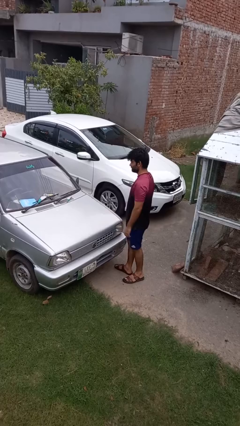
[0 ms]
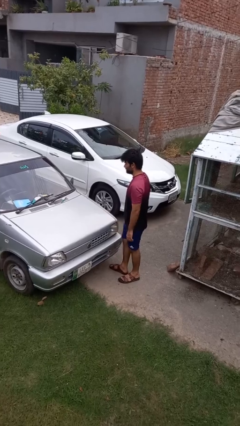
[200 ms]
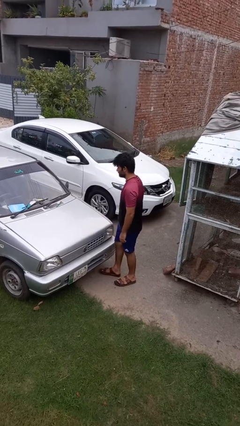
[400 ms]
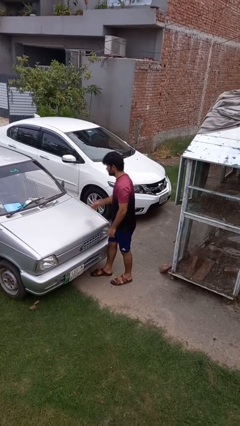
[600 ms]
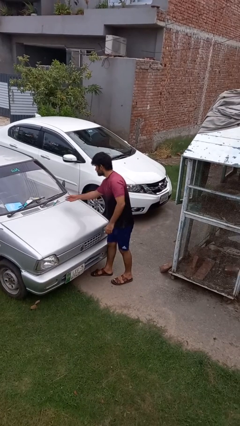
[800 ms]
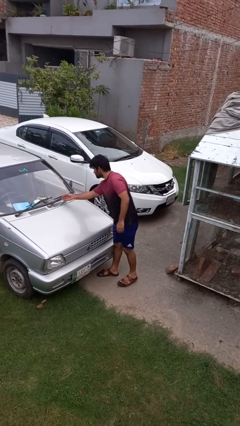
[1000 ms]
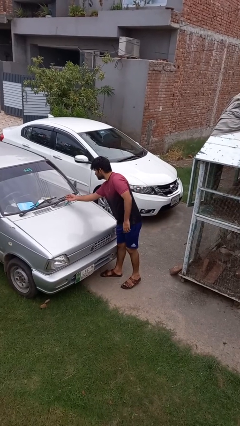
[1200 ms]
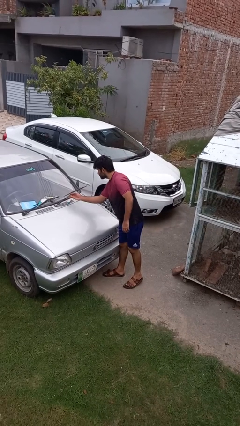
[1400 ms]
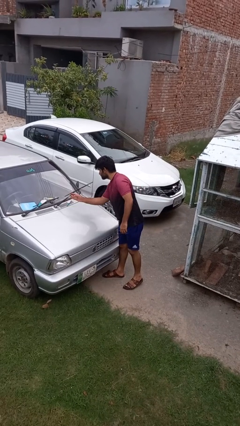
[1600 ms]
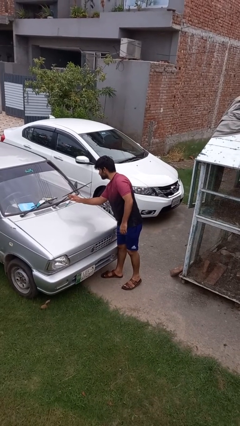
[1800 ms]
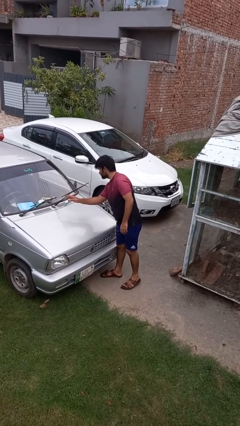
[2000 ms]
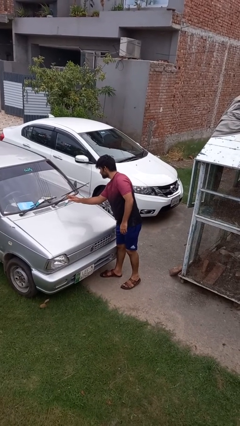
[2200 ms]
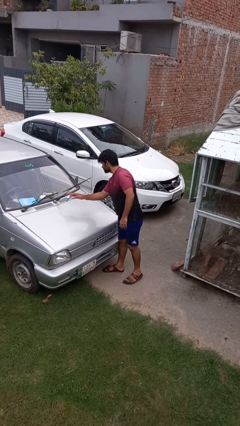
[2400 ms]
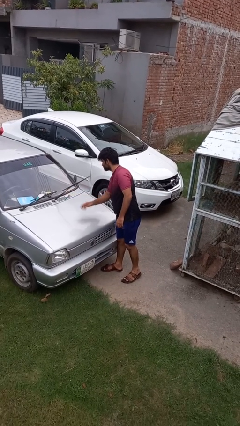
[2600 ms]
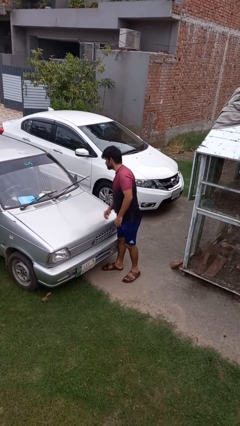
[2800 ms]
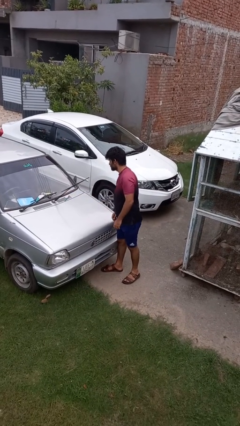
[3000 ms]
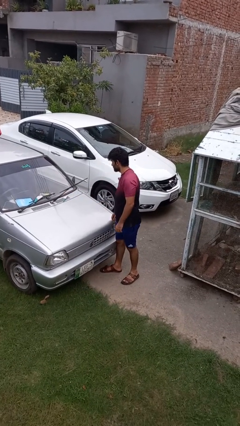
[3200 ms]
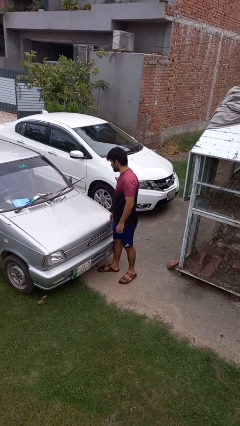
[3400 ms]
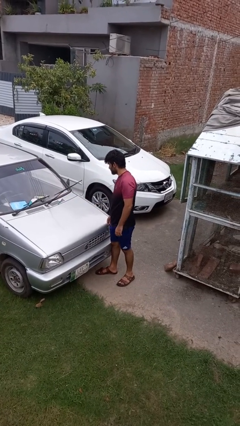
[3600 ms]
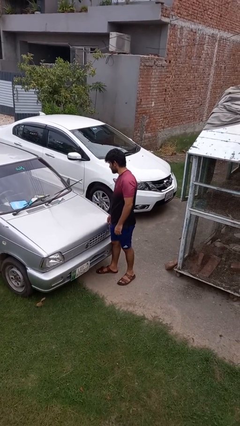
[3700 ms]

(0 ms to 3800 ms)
person flips up car wipers

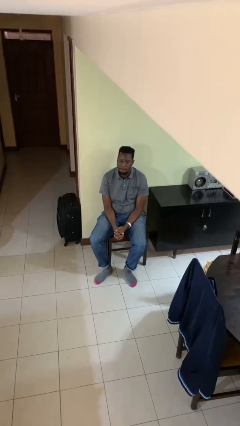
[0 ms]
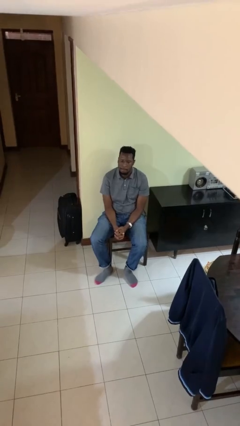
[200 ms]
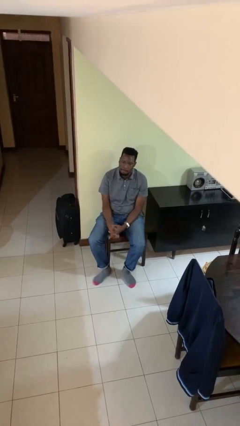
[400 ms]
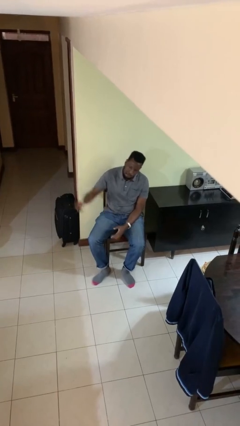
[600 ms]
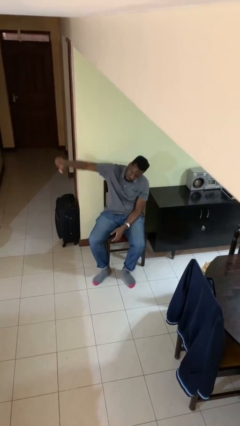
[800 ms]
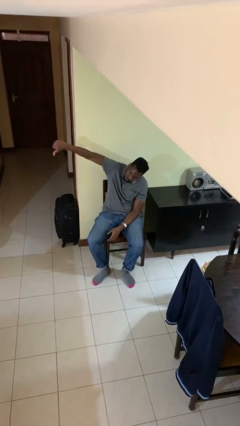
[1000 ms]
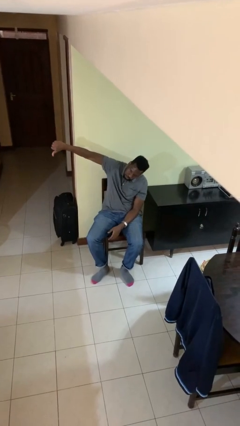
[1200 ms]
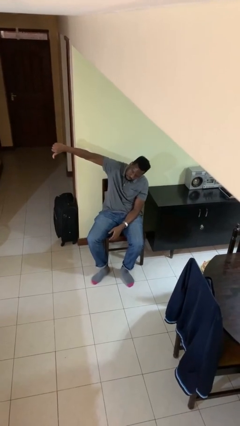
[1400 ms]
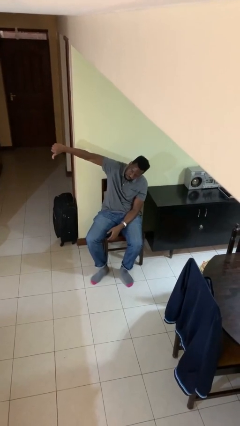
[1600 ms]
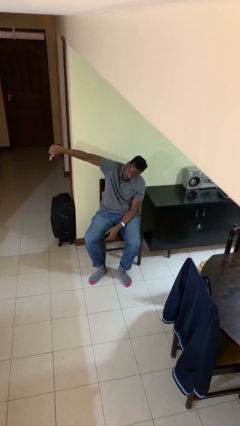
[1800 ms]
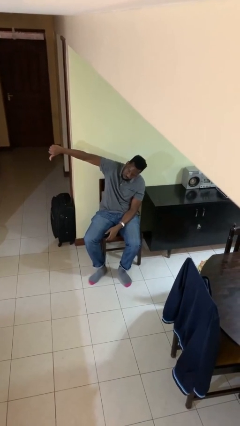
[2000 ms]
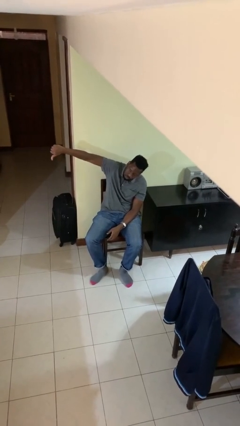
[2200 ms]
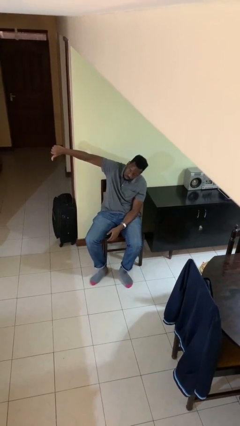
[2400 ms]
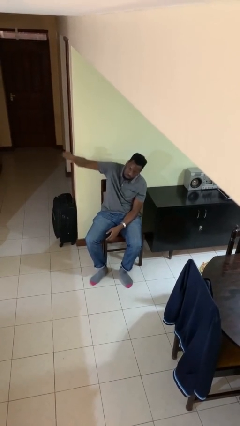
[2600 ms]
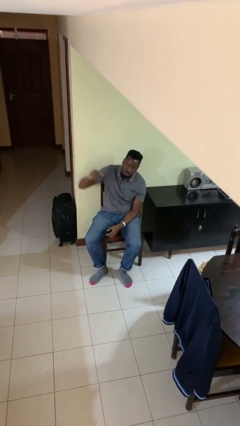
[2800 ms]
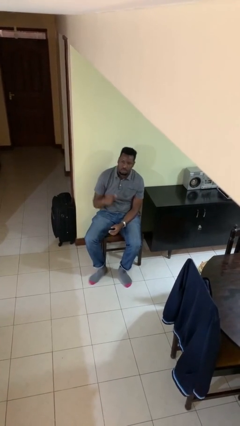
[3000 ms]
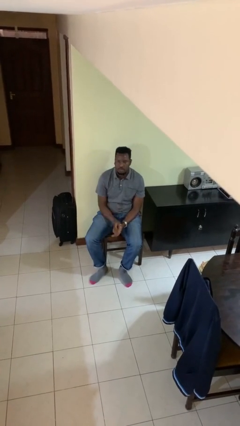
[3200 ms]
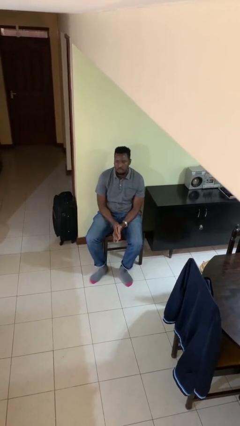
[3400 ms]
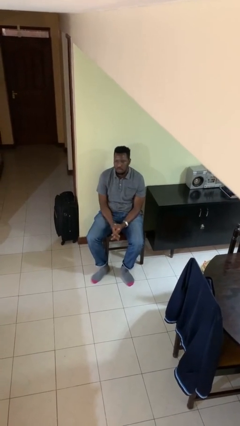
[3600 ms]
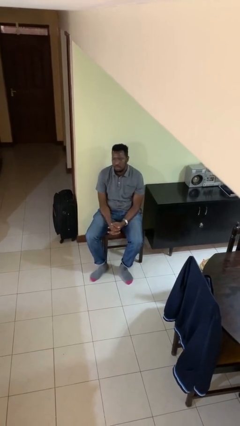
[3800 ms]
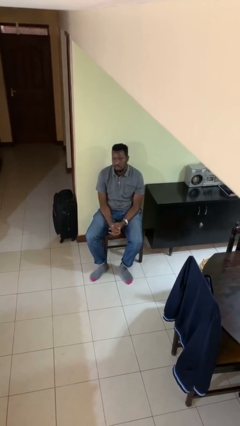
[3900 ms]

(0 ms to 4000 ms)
person gestures thumbs down

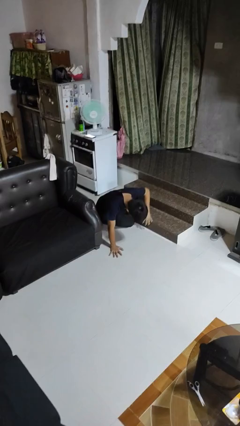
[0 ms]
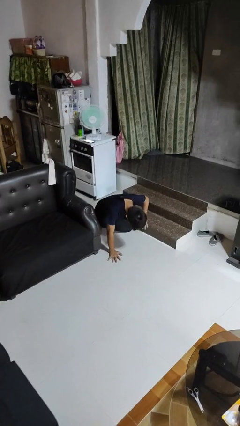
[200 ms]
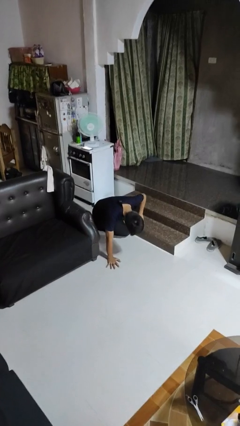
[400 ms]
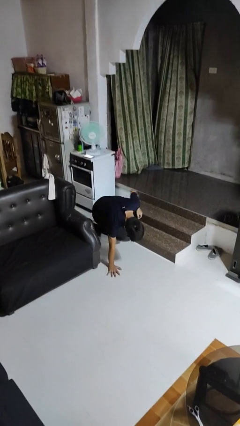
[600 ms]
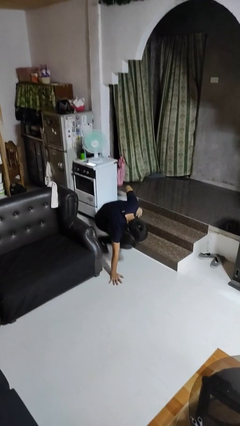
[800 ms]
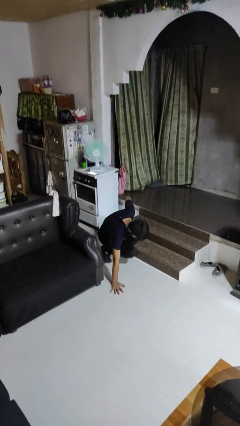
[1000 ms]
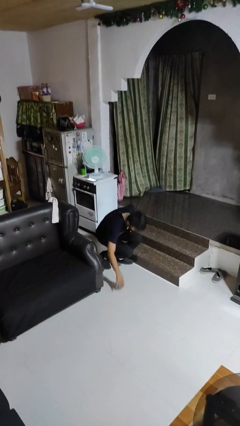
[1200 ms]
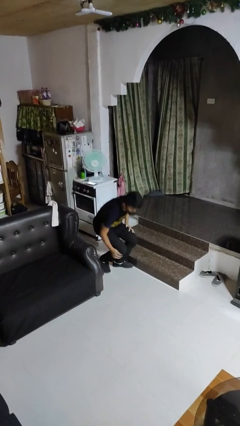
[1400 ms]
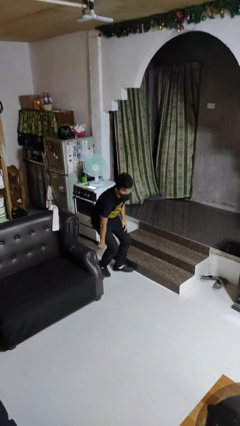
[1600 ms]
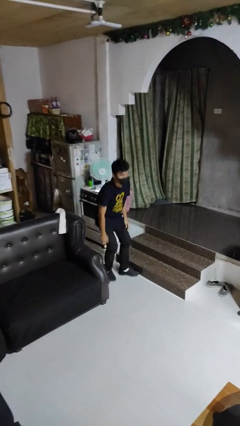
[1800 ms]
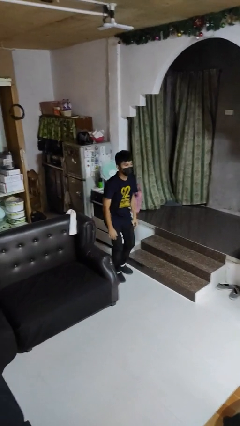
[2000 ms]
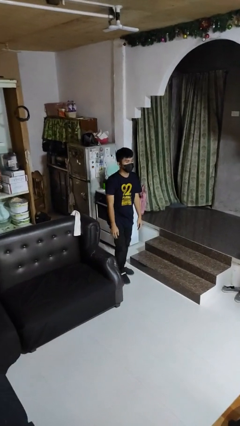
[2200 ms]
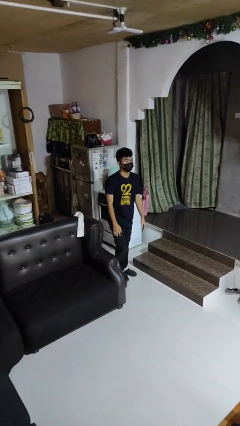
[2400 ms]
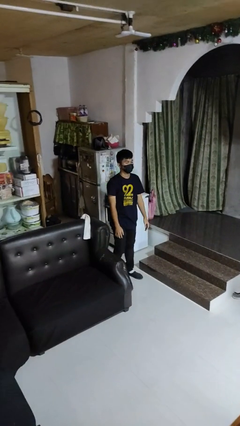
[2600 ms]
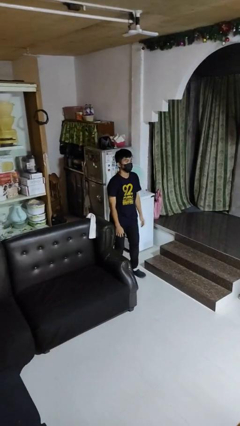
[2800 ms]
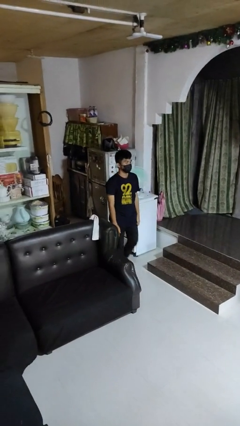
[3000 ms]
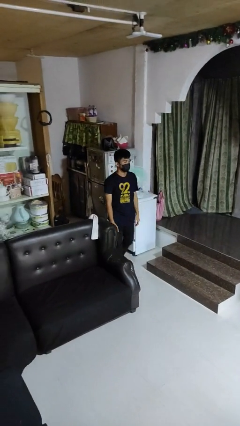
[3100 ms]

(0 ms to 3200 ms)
person stands up from floor

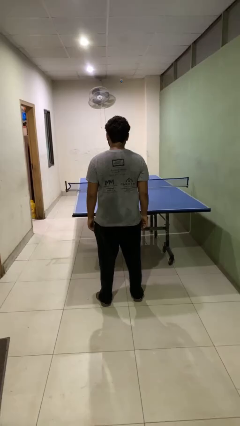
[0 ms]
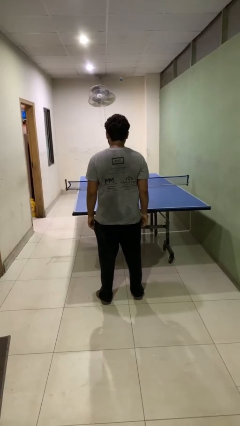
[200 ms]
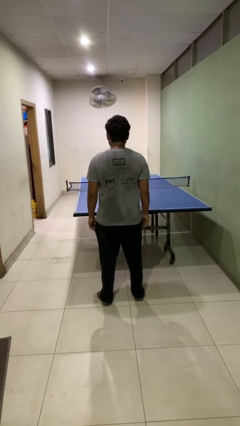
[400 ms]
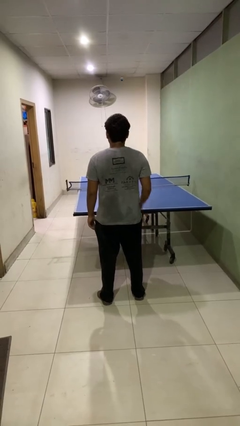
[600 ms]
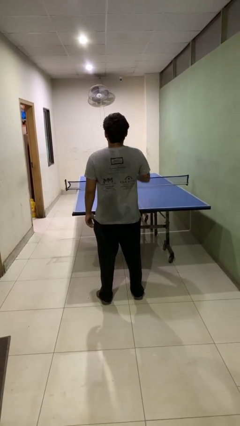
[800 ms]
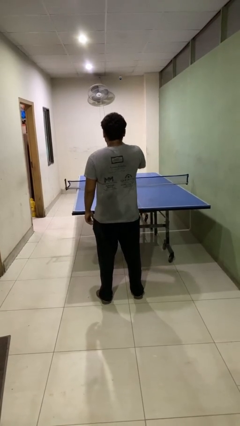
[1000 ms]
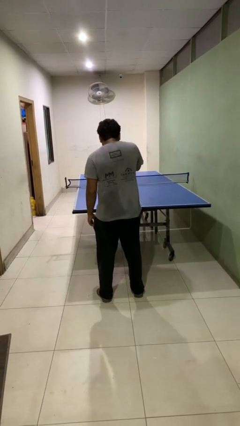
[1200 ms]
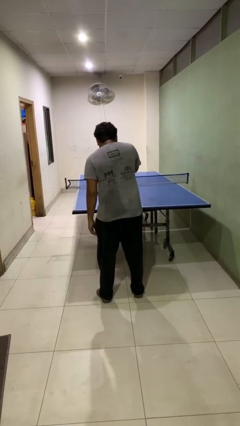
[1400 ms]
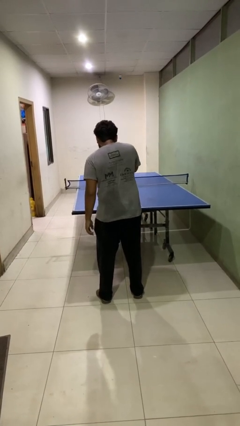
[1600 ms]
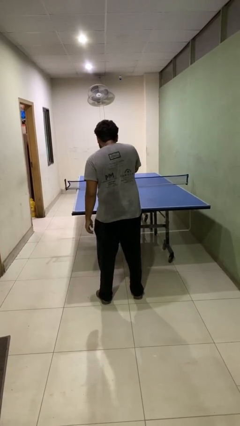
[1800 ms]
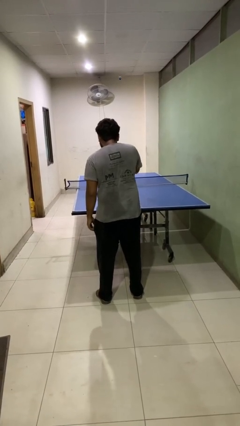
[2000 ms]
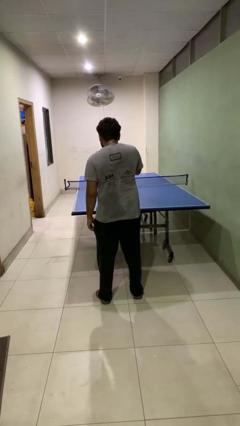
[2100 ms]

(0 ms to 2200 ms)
person sneezes into hand

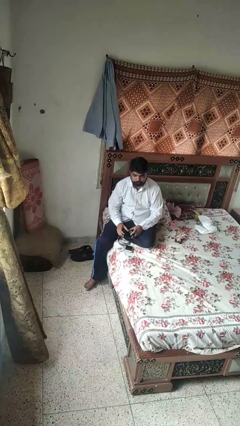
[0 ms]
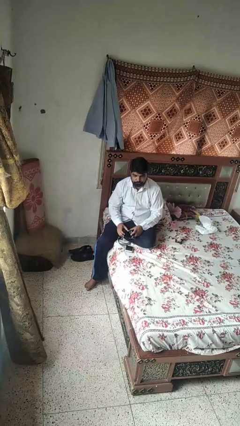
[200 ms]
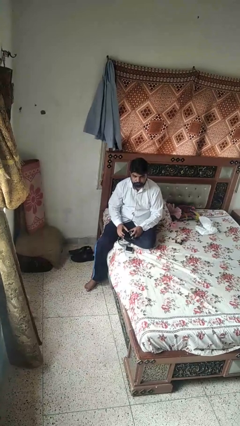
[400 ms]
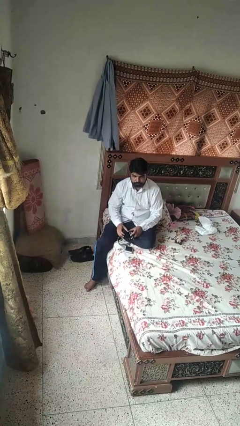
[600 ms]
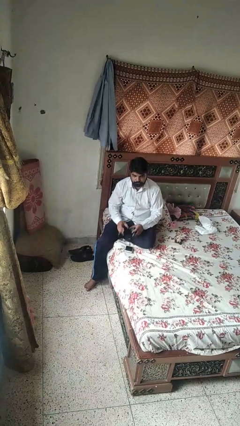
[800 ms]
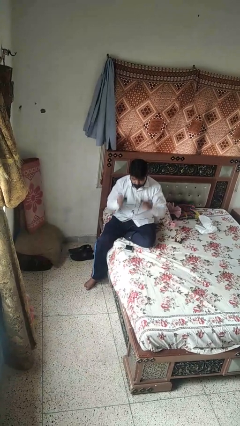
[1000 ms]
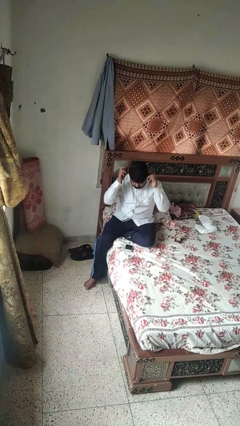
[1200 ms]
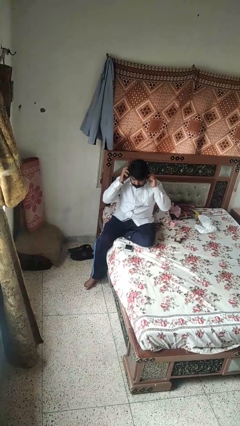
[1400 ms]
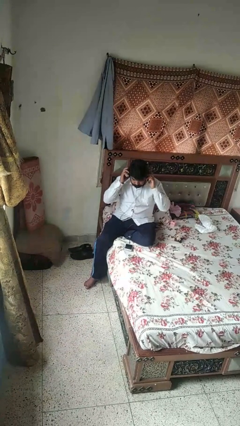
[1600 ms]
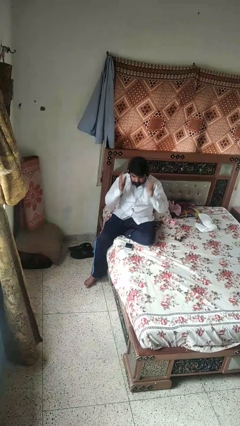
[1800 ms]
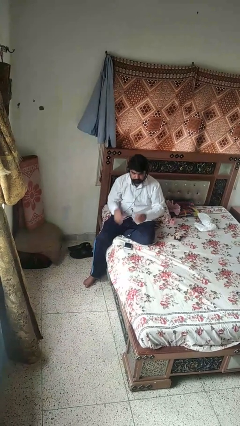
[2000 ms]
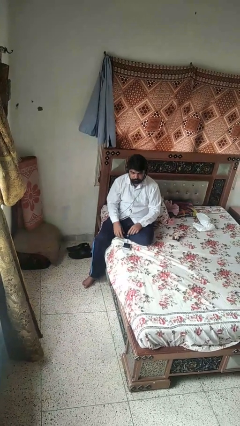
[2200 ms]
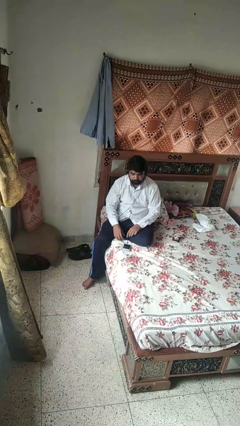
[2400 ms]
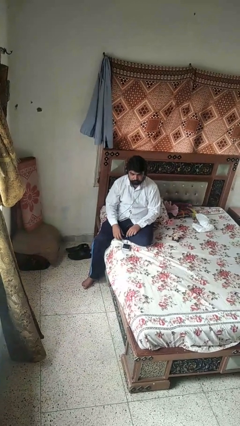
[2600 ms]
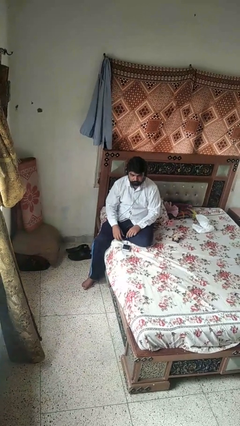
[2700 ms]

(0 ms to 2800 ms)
person puts on headphones

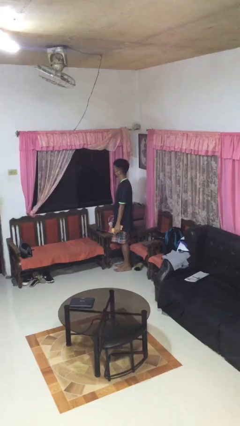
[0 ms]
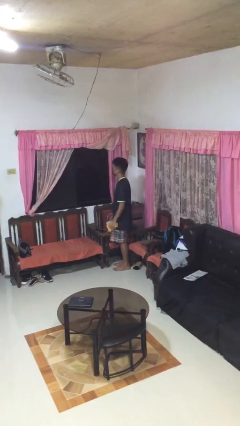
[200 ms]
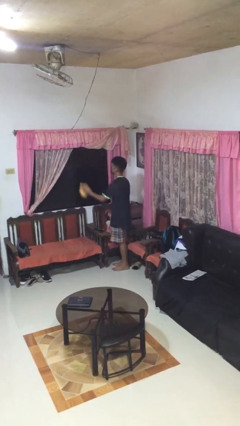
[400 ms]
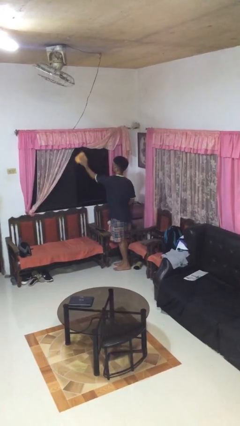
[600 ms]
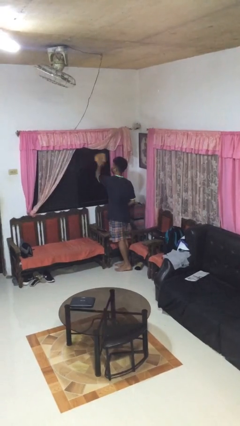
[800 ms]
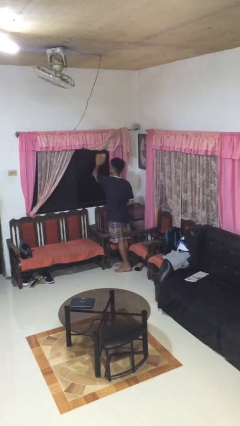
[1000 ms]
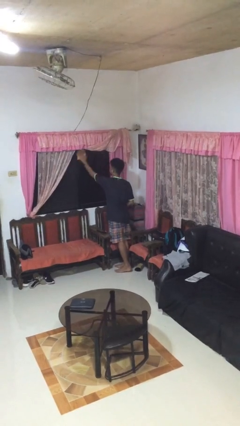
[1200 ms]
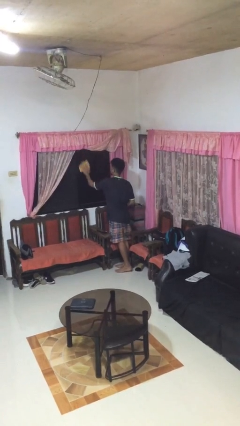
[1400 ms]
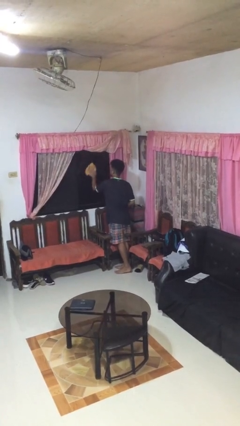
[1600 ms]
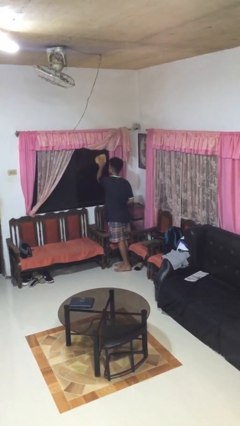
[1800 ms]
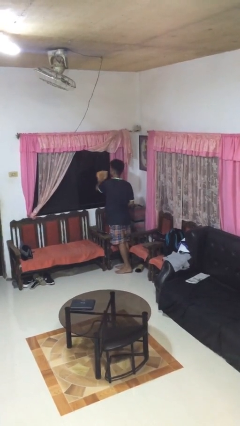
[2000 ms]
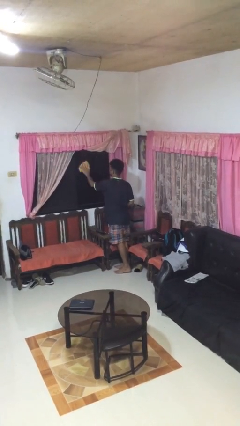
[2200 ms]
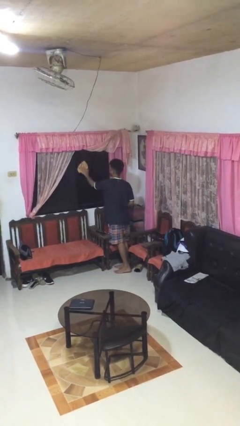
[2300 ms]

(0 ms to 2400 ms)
person washes window
